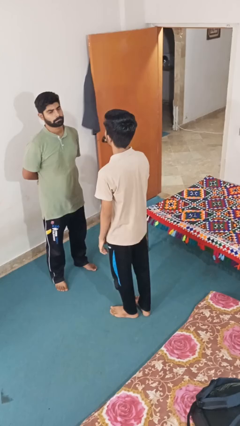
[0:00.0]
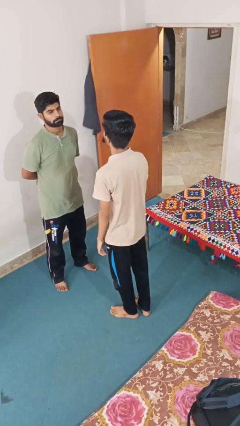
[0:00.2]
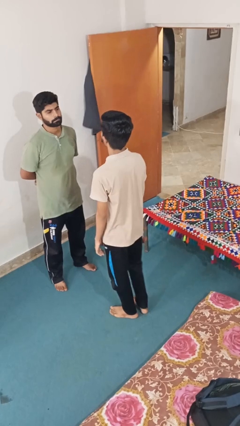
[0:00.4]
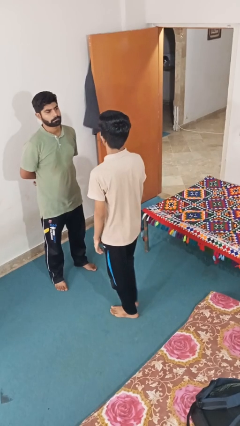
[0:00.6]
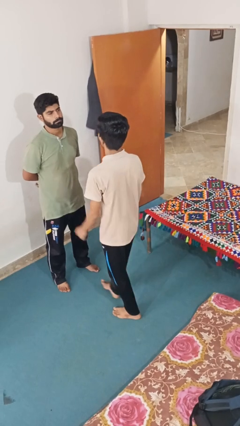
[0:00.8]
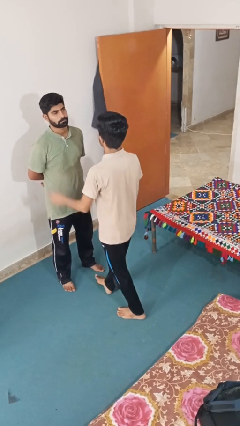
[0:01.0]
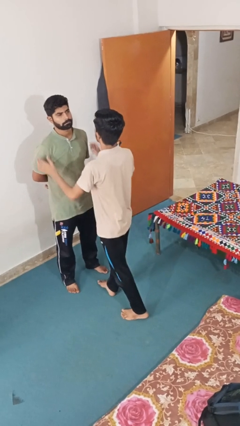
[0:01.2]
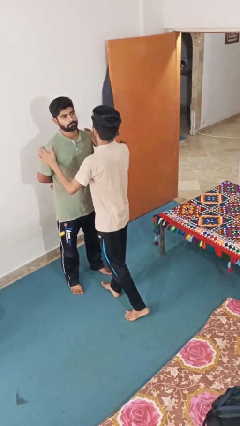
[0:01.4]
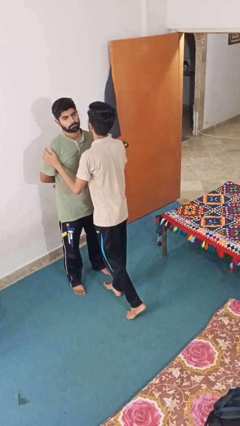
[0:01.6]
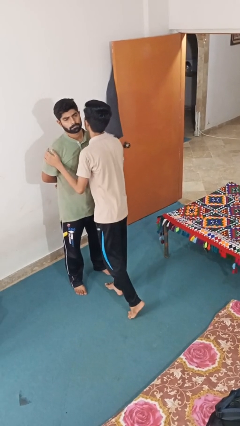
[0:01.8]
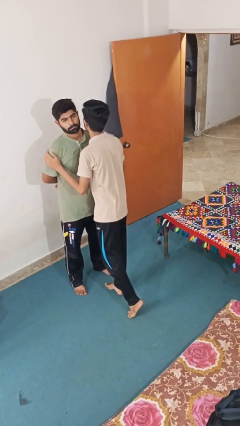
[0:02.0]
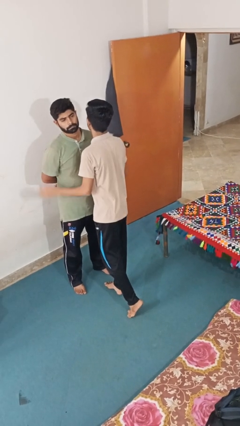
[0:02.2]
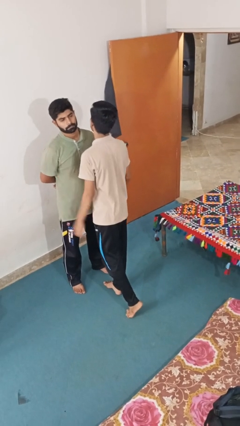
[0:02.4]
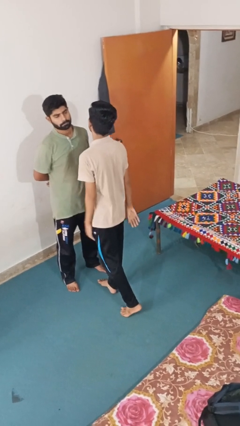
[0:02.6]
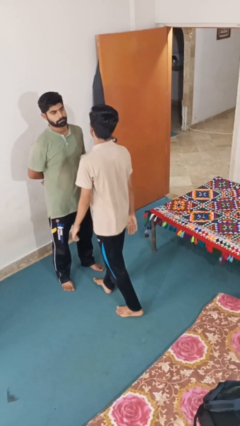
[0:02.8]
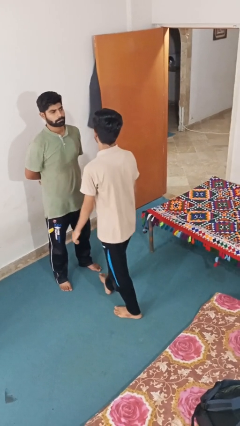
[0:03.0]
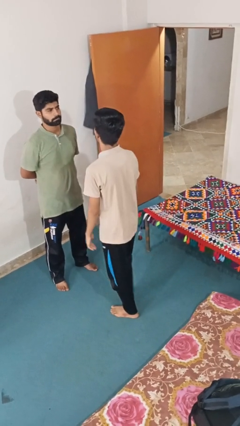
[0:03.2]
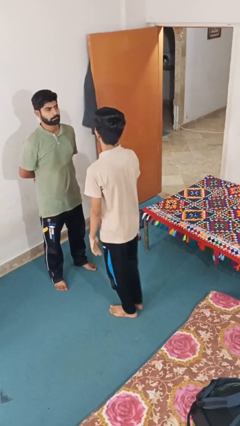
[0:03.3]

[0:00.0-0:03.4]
person kisses cheek of person

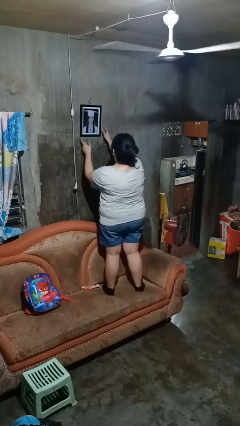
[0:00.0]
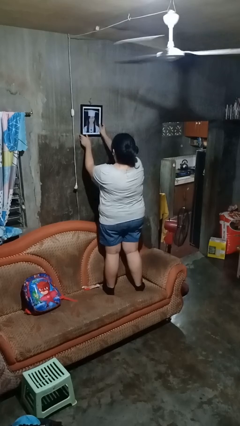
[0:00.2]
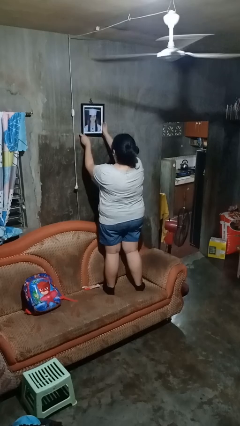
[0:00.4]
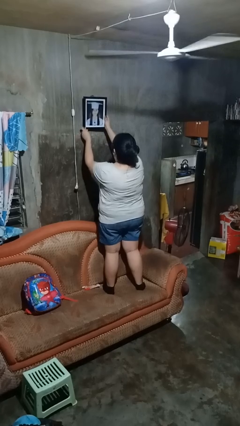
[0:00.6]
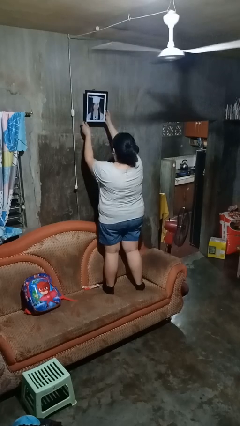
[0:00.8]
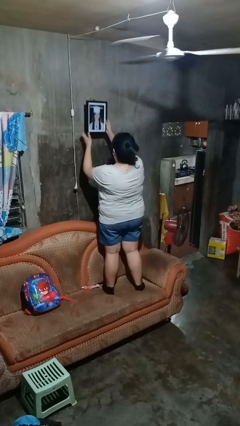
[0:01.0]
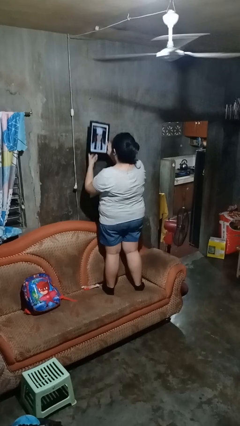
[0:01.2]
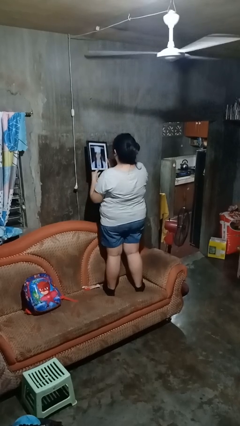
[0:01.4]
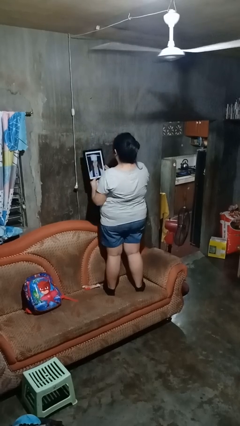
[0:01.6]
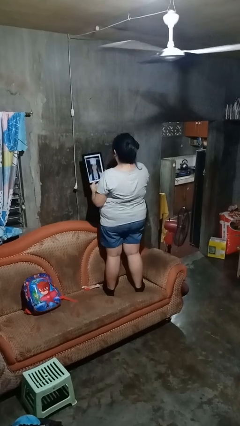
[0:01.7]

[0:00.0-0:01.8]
person takes down picture frame

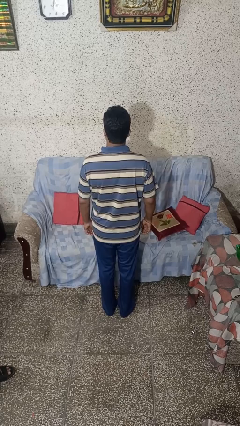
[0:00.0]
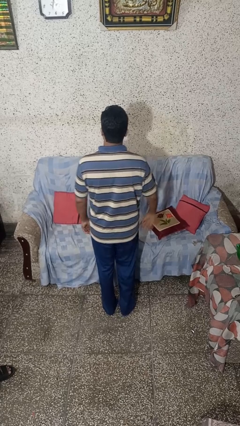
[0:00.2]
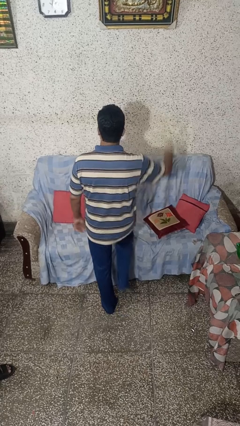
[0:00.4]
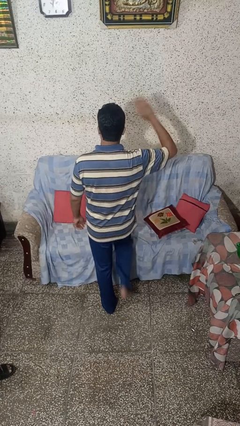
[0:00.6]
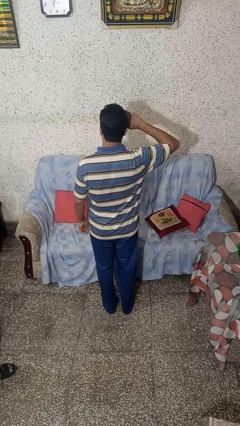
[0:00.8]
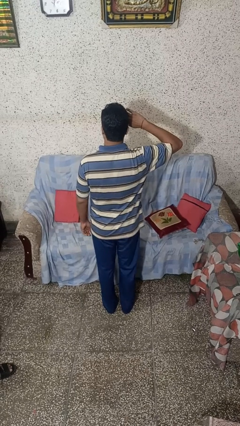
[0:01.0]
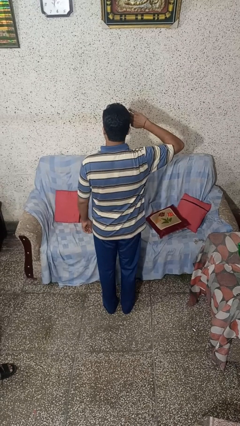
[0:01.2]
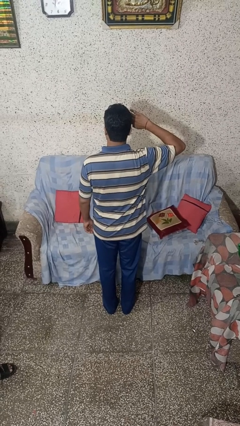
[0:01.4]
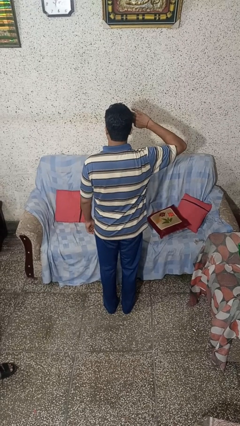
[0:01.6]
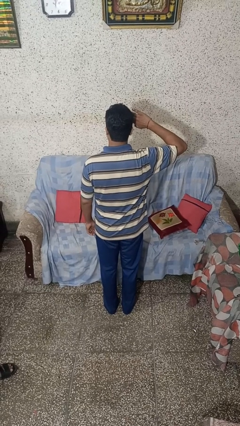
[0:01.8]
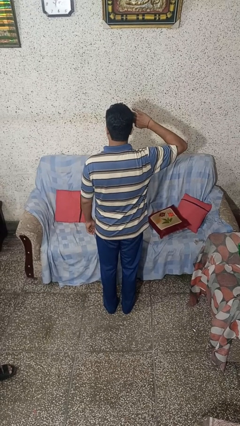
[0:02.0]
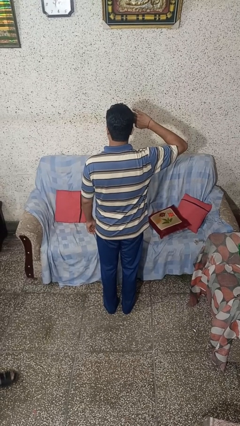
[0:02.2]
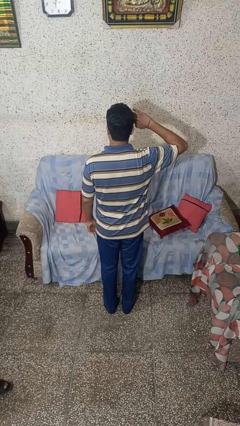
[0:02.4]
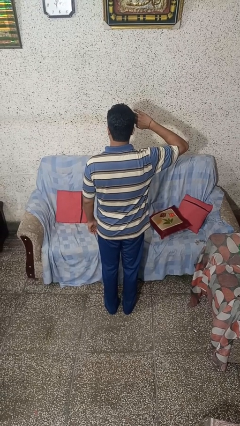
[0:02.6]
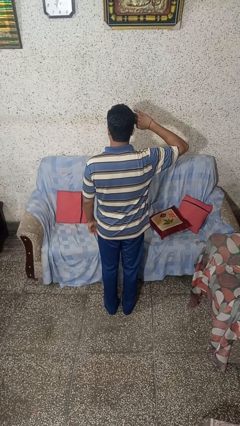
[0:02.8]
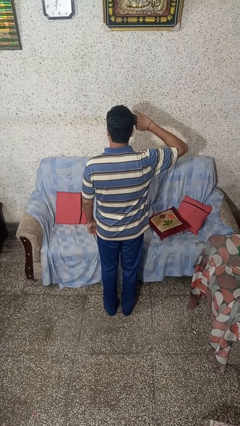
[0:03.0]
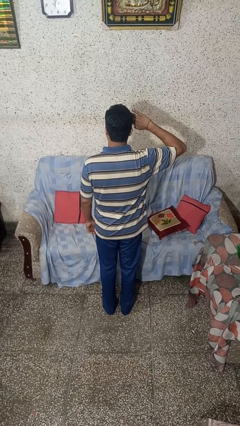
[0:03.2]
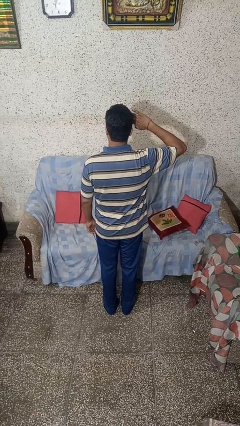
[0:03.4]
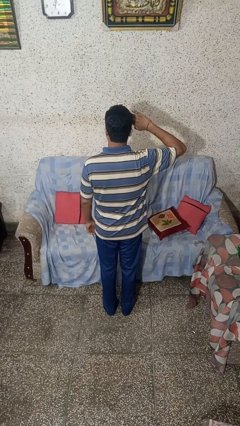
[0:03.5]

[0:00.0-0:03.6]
person salutes

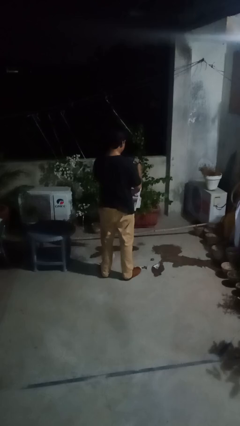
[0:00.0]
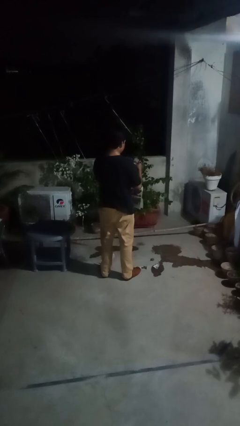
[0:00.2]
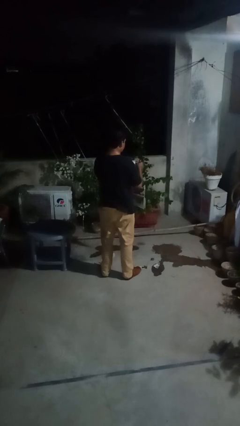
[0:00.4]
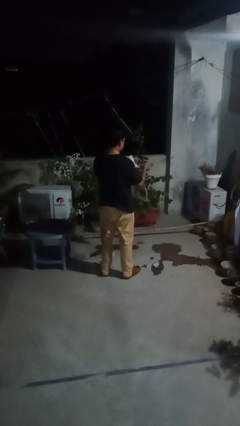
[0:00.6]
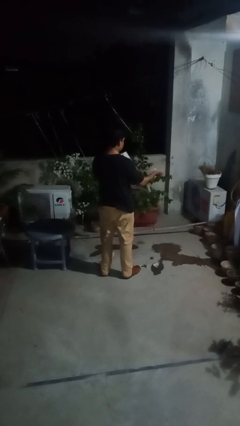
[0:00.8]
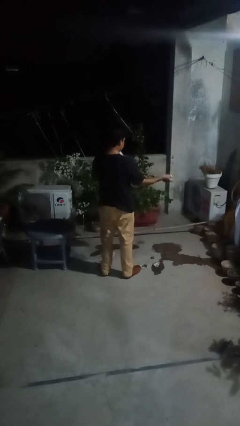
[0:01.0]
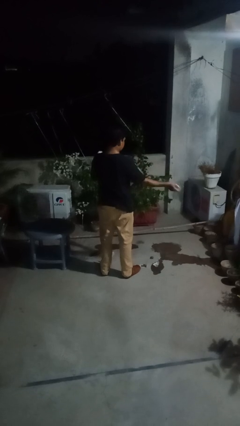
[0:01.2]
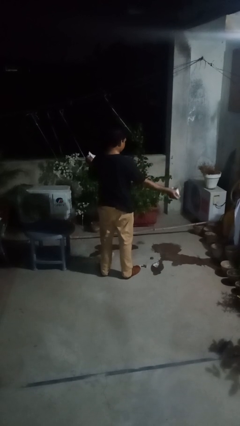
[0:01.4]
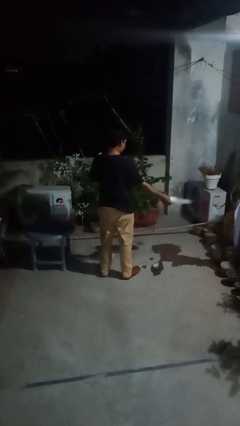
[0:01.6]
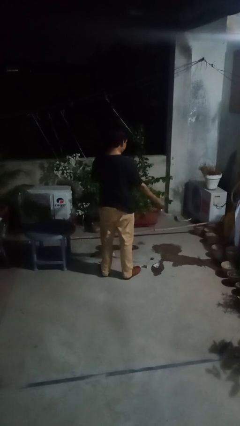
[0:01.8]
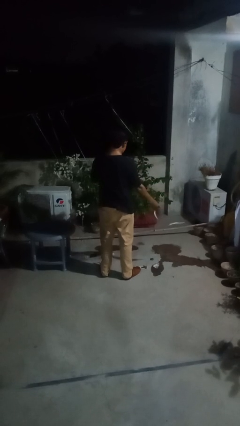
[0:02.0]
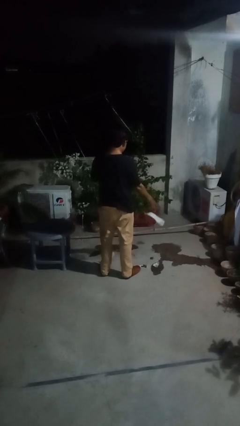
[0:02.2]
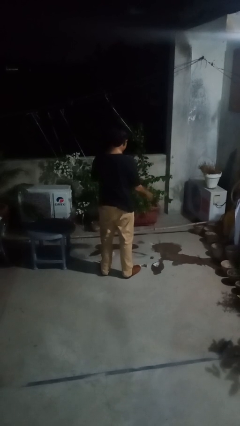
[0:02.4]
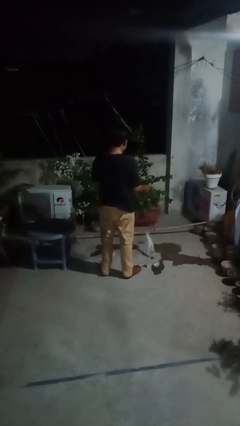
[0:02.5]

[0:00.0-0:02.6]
person tears paper

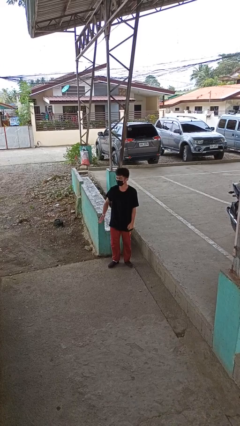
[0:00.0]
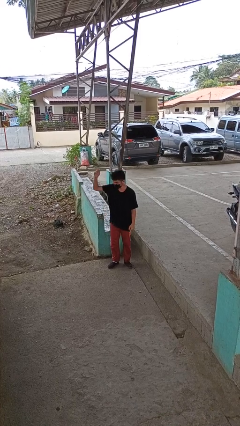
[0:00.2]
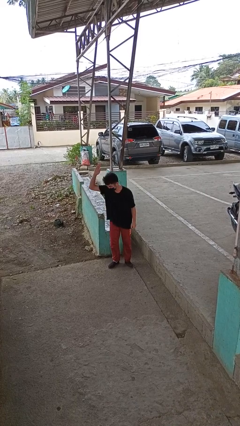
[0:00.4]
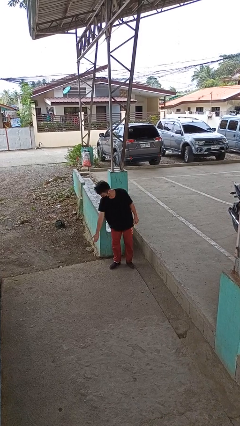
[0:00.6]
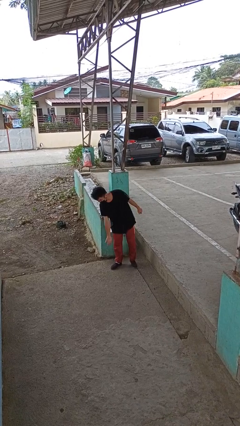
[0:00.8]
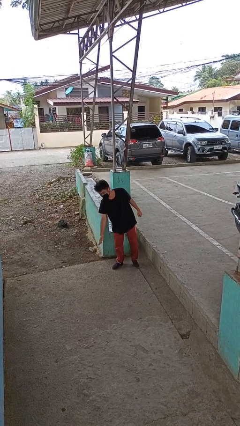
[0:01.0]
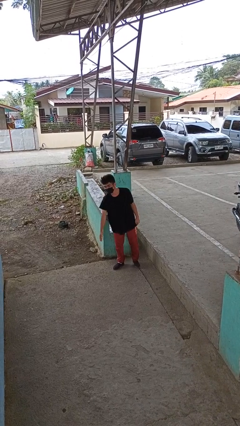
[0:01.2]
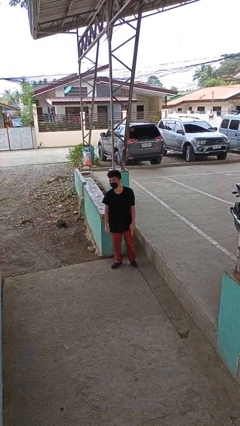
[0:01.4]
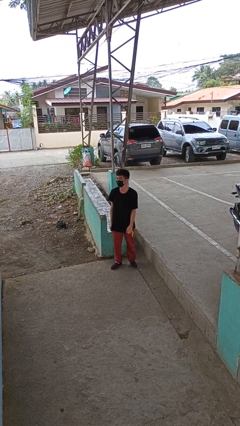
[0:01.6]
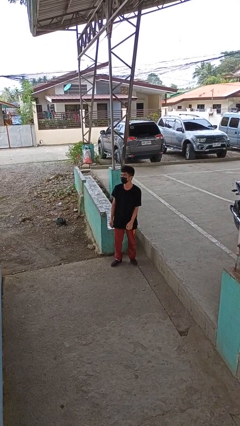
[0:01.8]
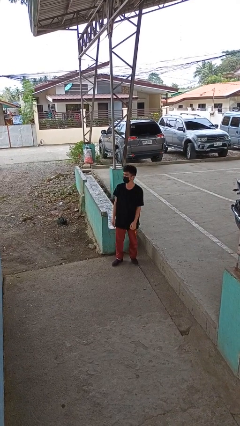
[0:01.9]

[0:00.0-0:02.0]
person karate chop

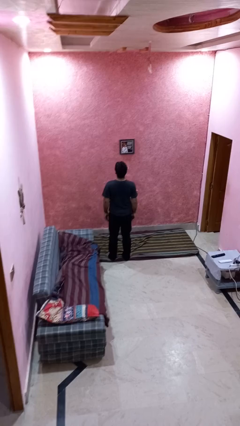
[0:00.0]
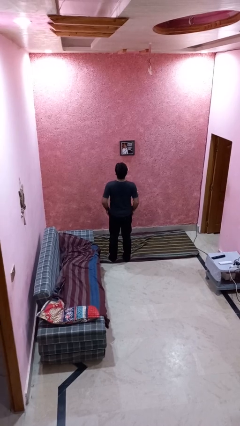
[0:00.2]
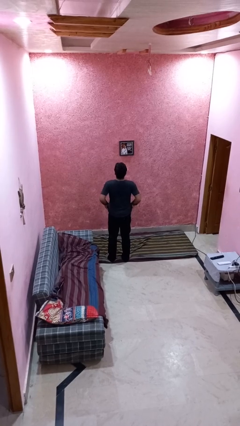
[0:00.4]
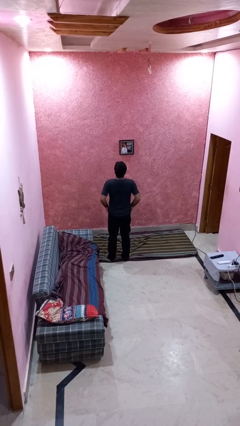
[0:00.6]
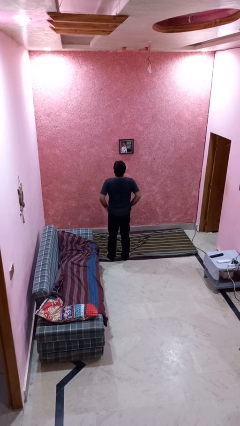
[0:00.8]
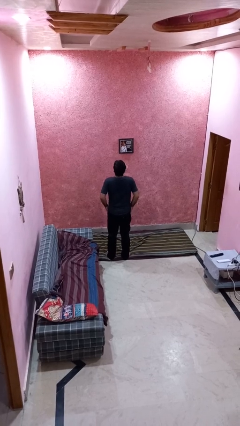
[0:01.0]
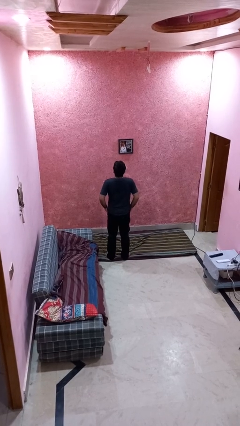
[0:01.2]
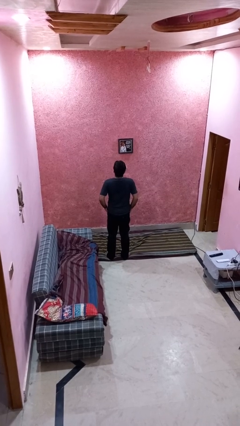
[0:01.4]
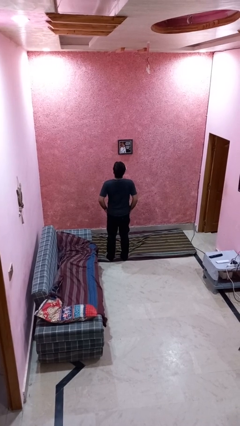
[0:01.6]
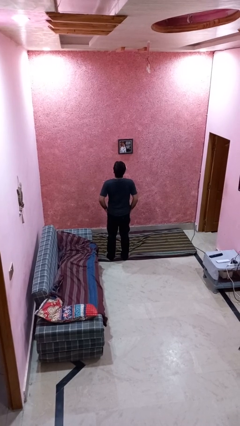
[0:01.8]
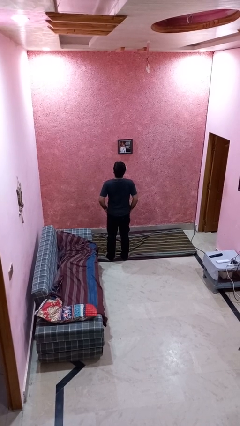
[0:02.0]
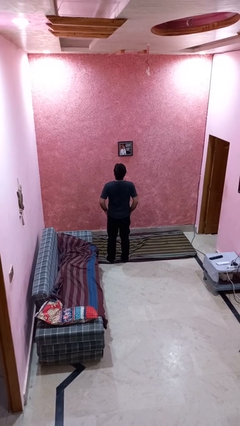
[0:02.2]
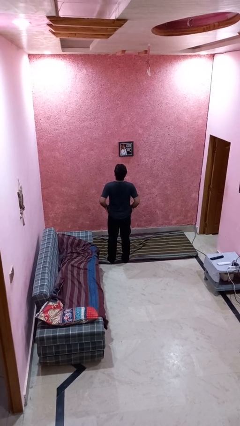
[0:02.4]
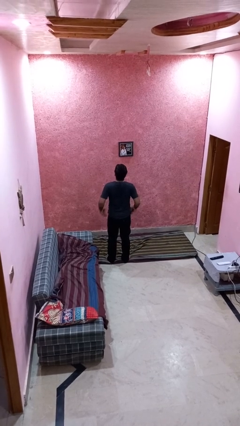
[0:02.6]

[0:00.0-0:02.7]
person puts hands in back pockets

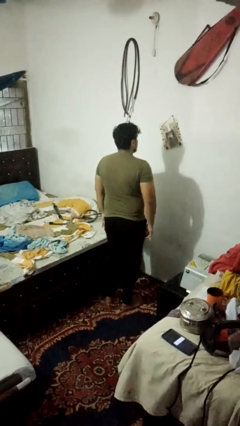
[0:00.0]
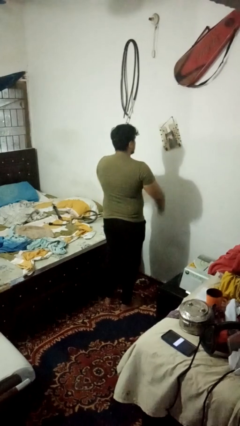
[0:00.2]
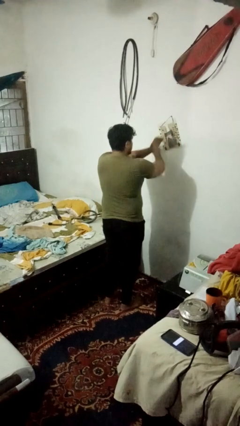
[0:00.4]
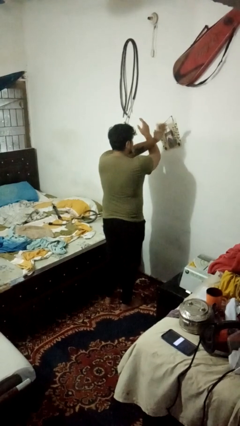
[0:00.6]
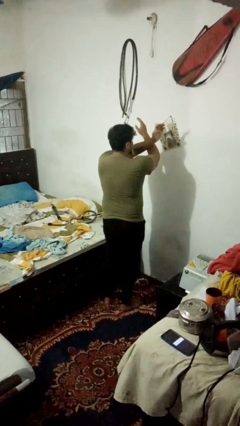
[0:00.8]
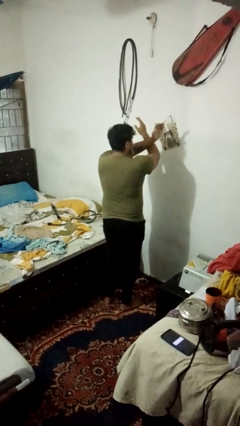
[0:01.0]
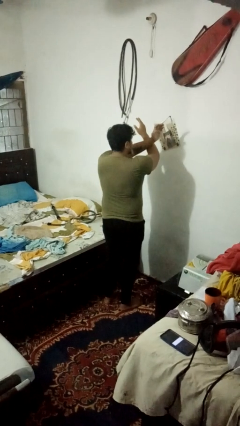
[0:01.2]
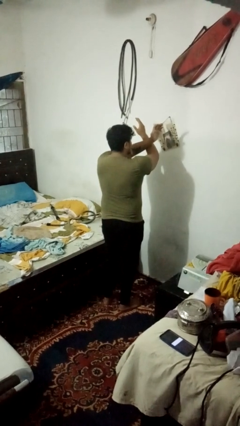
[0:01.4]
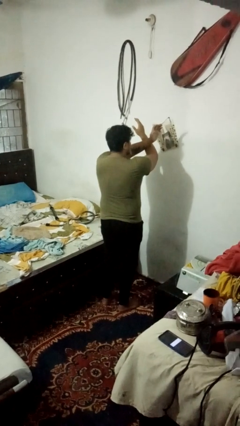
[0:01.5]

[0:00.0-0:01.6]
person gestures arms x
